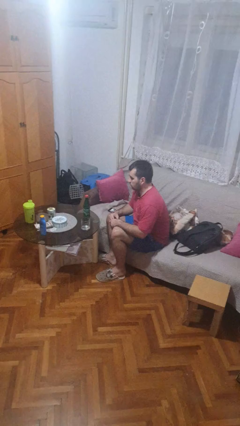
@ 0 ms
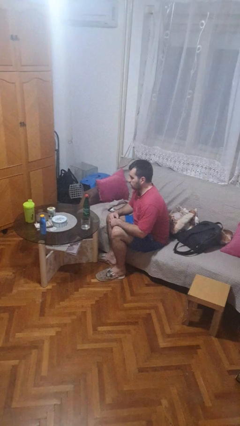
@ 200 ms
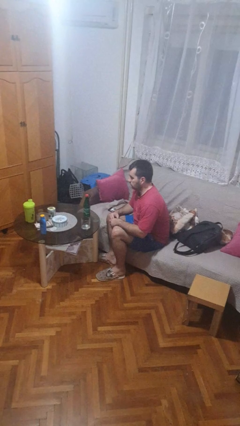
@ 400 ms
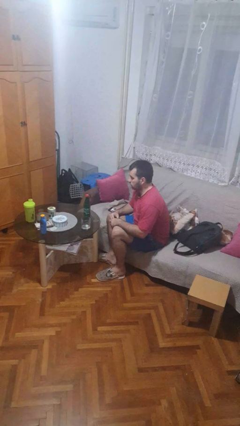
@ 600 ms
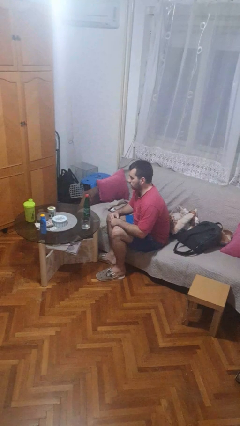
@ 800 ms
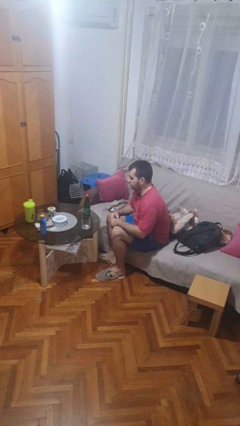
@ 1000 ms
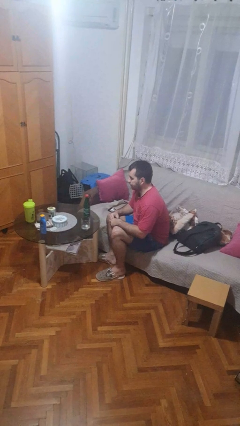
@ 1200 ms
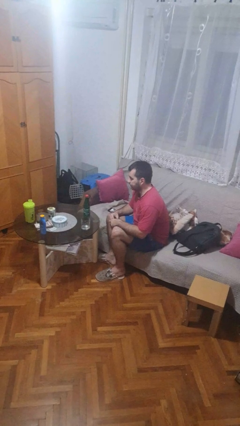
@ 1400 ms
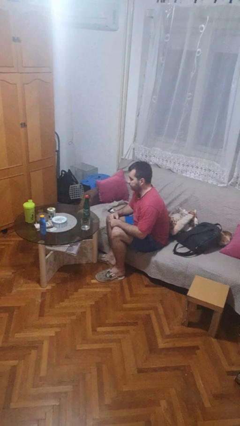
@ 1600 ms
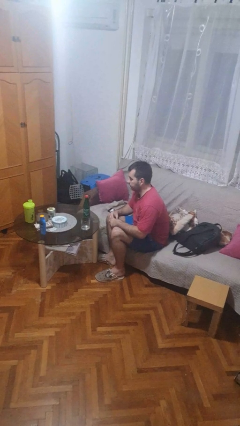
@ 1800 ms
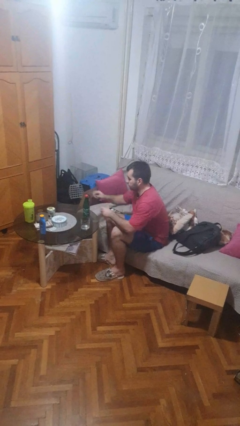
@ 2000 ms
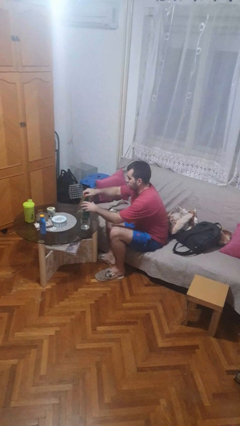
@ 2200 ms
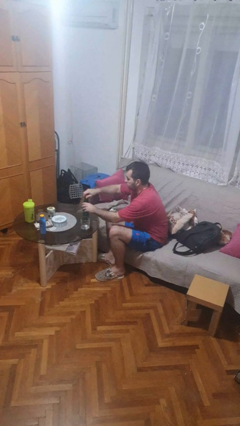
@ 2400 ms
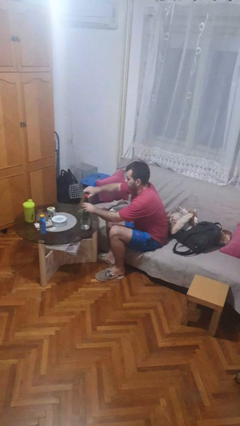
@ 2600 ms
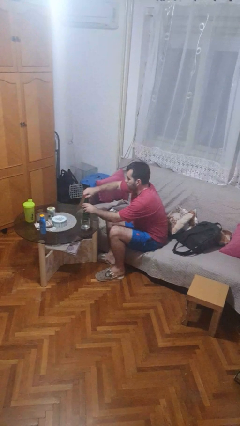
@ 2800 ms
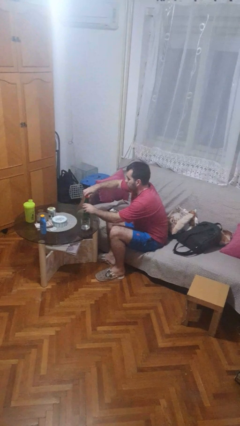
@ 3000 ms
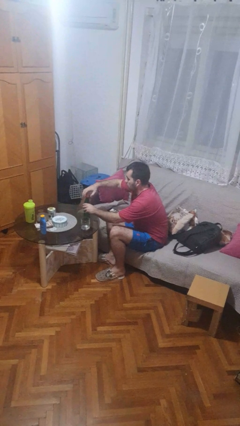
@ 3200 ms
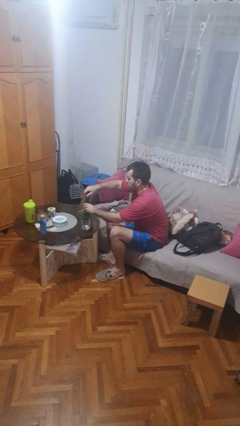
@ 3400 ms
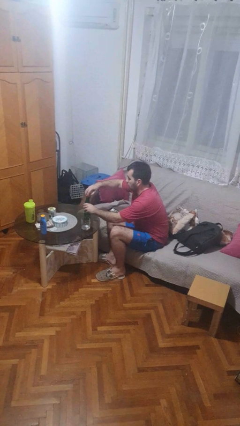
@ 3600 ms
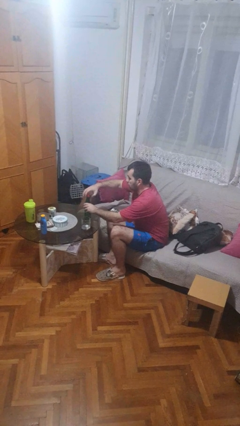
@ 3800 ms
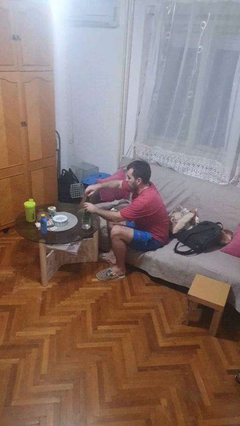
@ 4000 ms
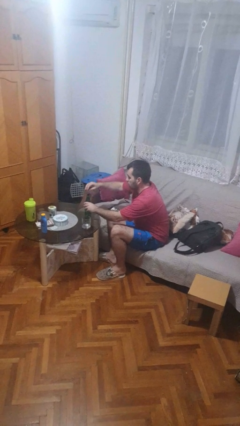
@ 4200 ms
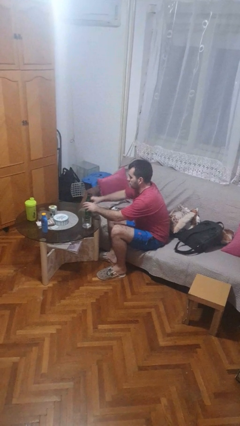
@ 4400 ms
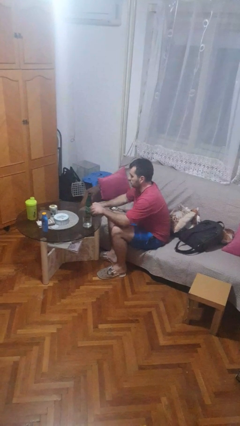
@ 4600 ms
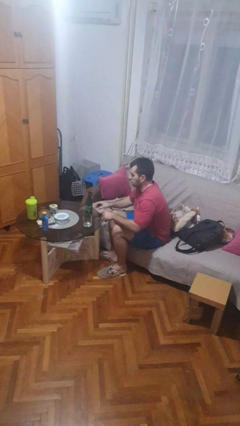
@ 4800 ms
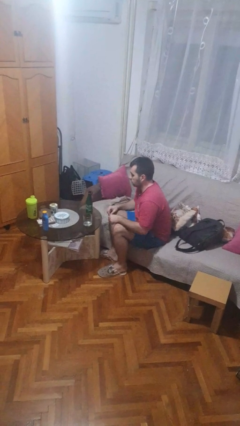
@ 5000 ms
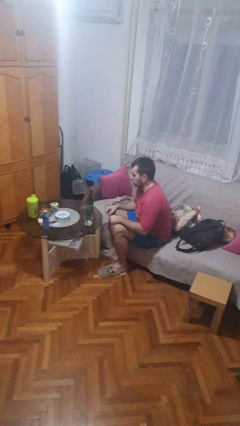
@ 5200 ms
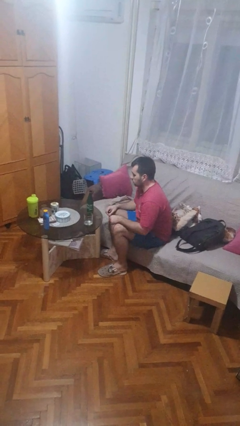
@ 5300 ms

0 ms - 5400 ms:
person unscrews lid from bottle

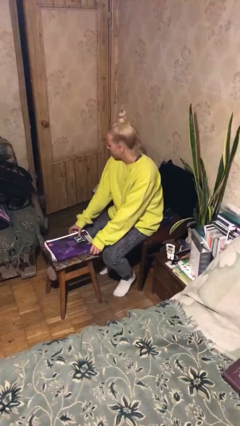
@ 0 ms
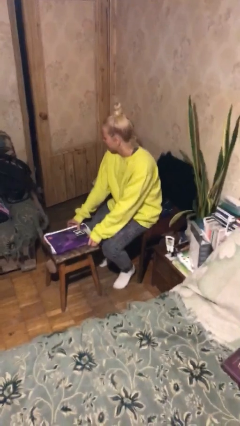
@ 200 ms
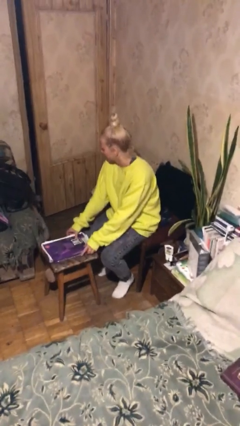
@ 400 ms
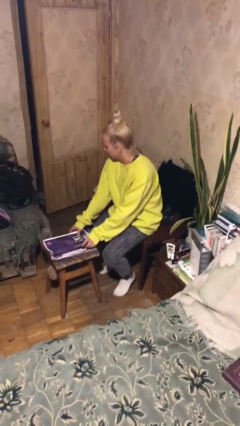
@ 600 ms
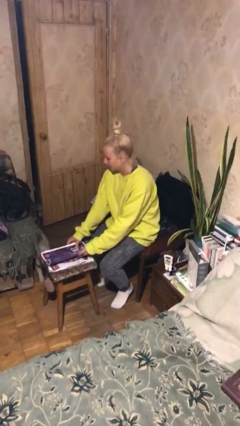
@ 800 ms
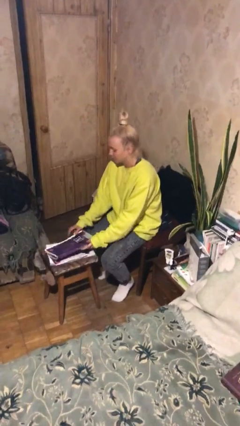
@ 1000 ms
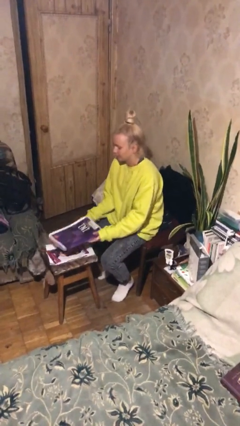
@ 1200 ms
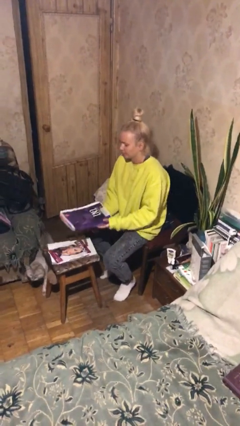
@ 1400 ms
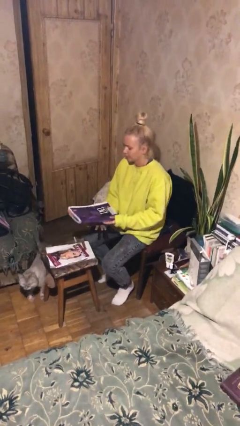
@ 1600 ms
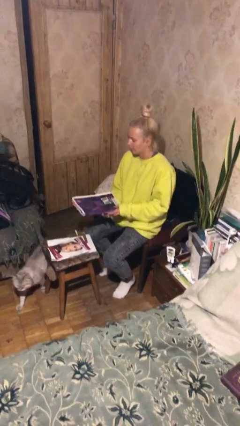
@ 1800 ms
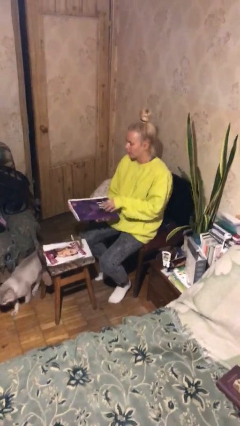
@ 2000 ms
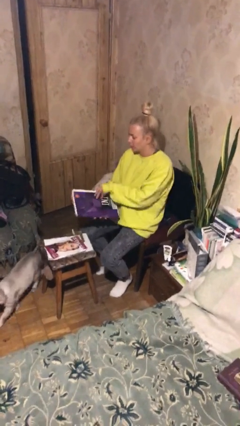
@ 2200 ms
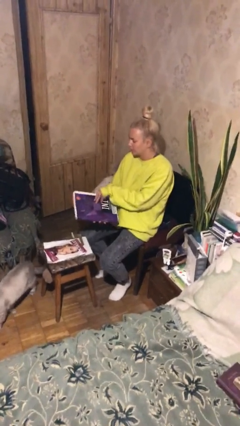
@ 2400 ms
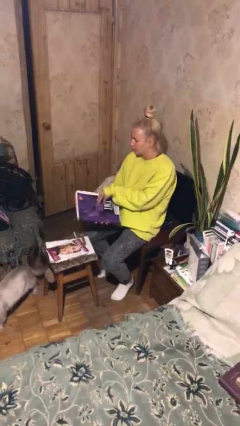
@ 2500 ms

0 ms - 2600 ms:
person picks up object from table

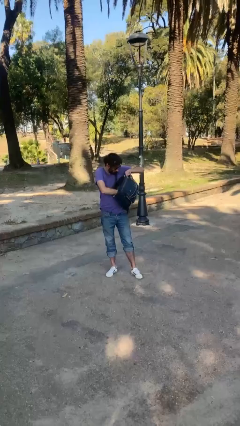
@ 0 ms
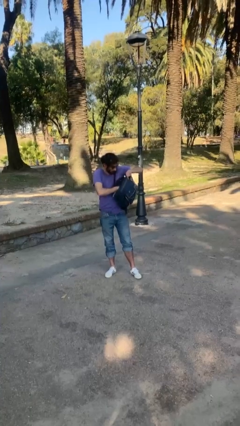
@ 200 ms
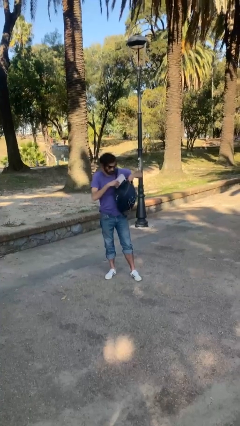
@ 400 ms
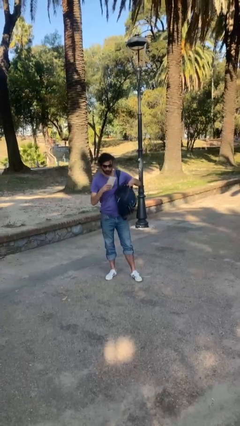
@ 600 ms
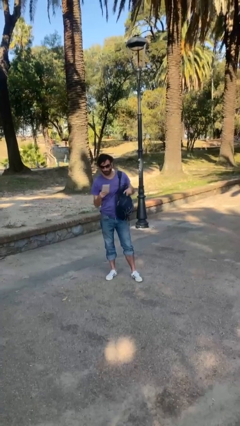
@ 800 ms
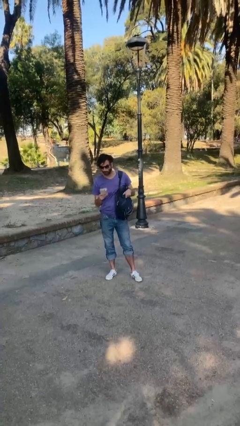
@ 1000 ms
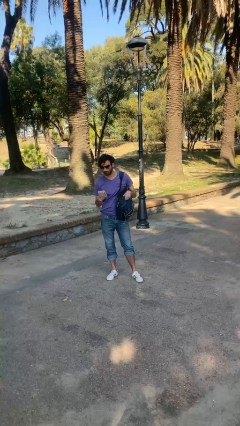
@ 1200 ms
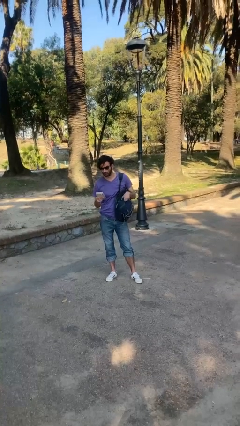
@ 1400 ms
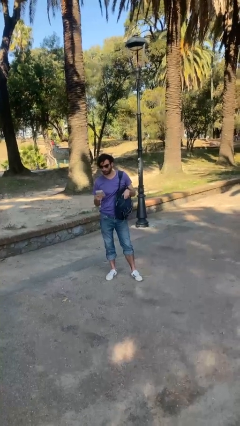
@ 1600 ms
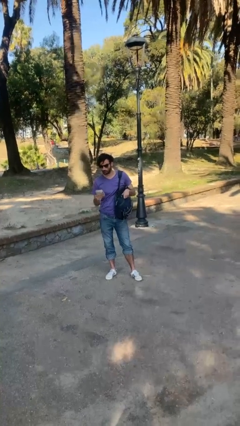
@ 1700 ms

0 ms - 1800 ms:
person takes object from backpack

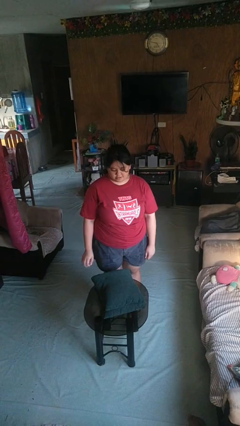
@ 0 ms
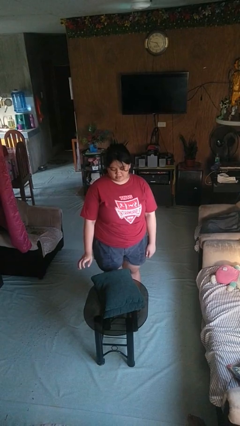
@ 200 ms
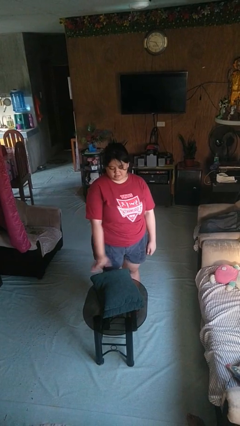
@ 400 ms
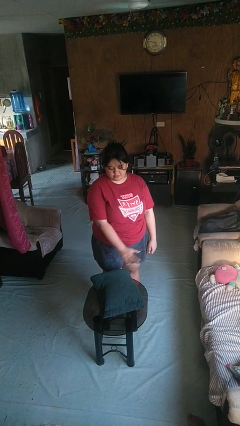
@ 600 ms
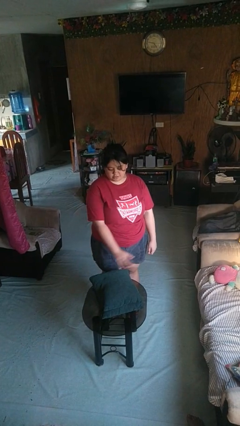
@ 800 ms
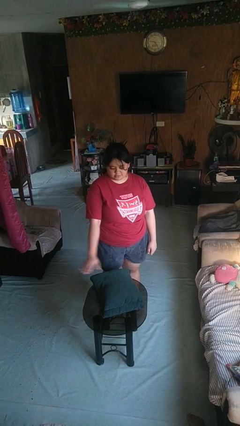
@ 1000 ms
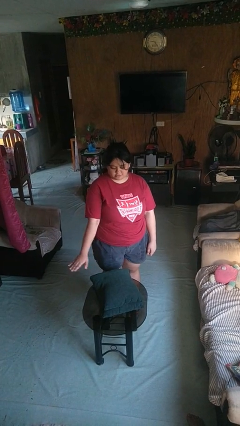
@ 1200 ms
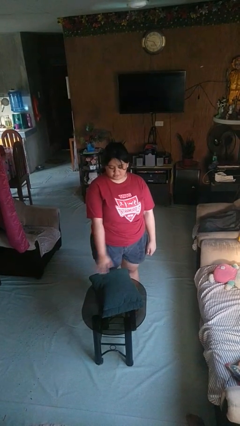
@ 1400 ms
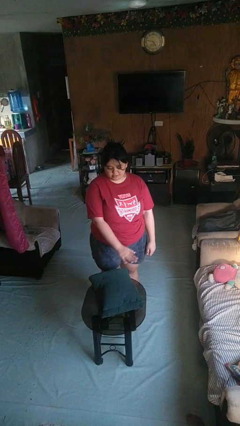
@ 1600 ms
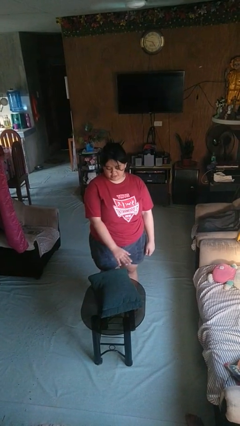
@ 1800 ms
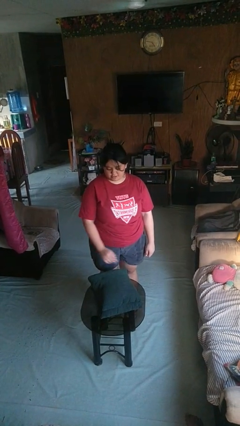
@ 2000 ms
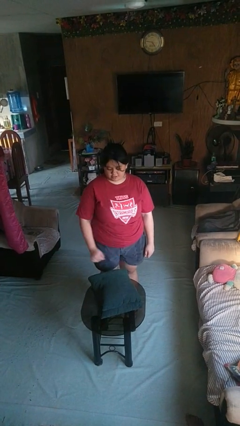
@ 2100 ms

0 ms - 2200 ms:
person waves hand over object

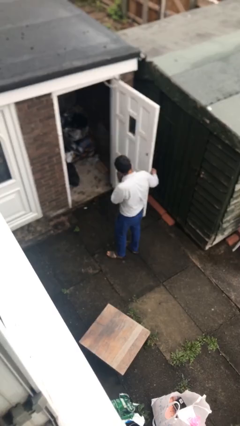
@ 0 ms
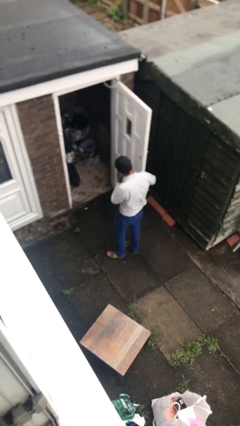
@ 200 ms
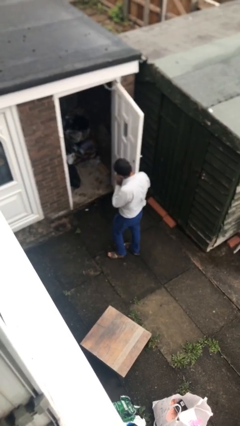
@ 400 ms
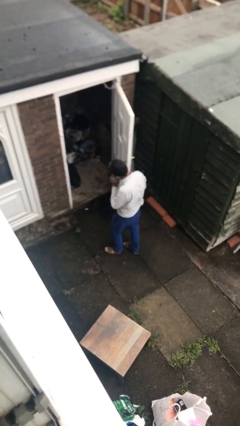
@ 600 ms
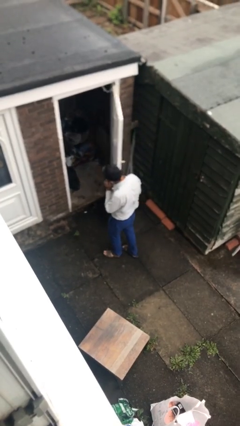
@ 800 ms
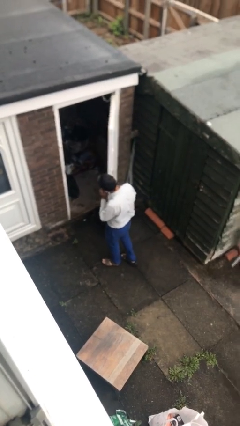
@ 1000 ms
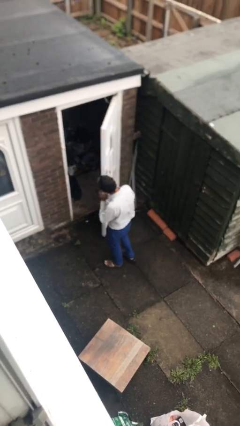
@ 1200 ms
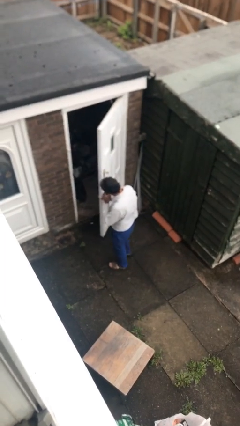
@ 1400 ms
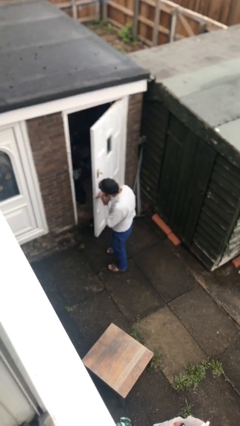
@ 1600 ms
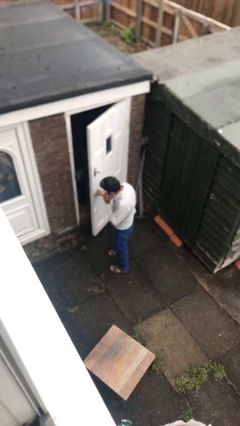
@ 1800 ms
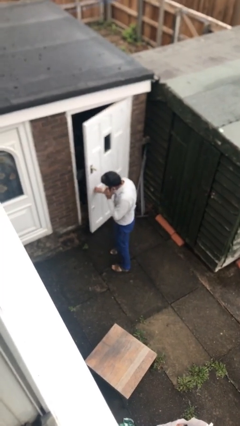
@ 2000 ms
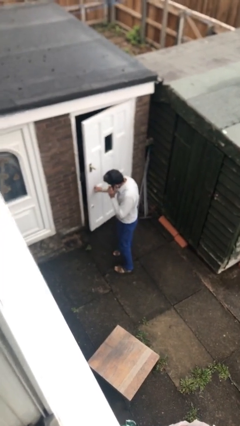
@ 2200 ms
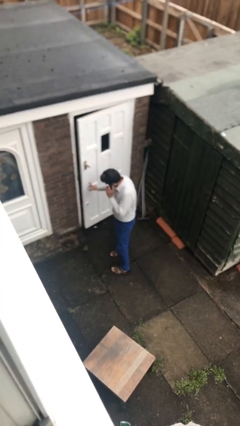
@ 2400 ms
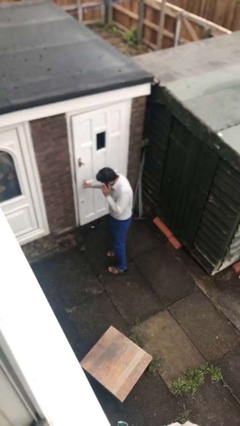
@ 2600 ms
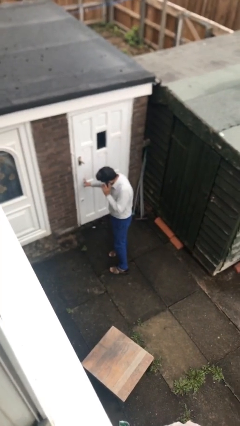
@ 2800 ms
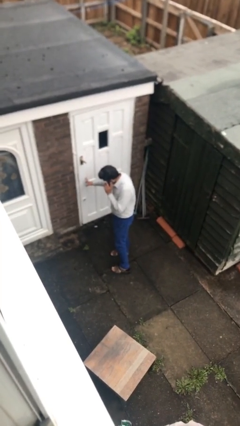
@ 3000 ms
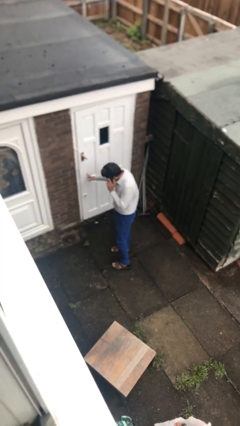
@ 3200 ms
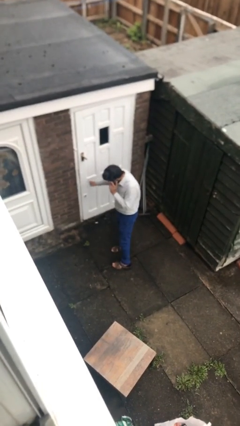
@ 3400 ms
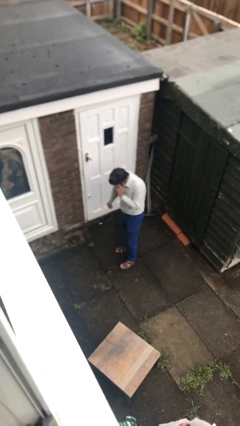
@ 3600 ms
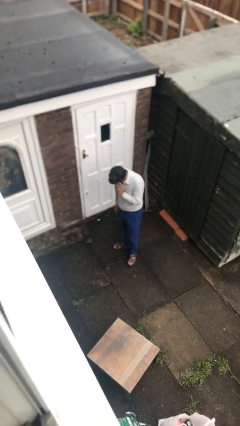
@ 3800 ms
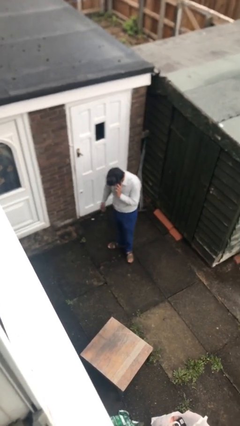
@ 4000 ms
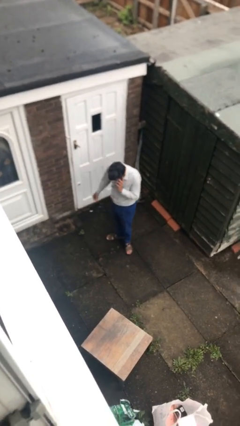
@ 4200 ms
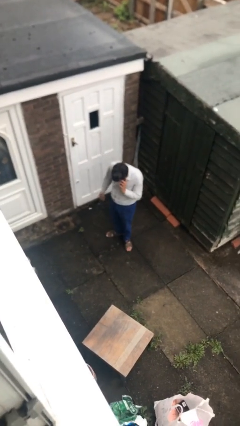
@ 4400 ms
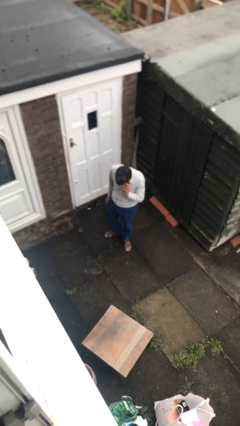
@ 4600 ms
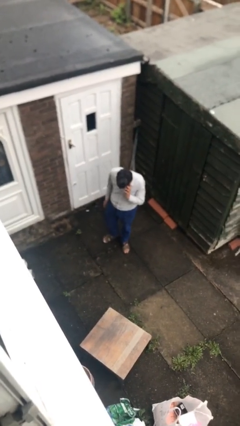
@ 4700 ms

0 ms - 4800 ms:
person closes facility door

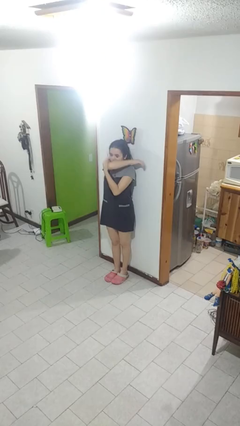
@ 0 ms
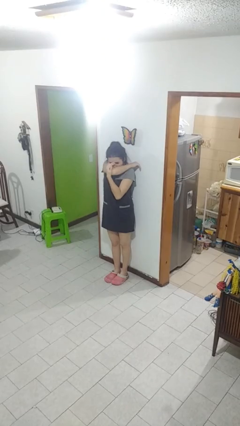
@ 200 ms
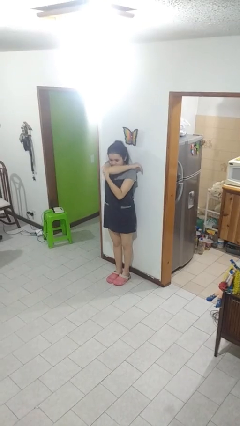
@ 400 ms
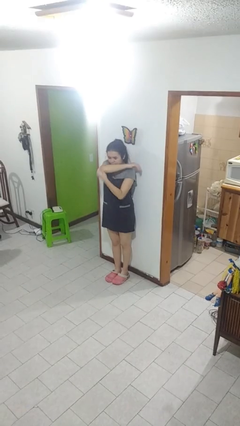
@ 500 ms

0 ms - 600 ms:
person sneezes into arm
